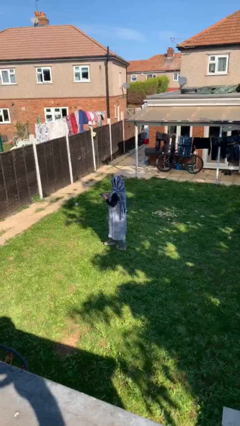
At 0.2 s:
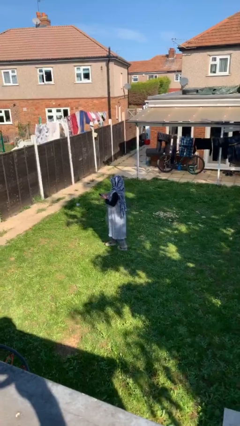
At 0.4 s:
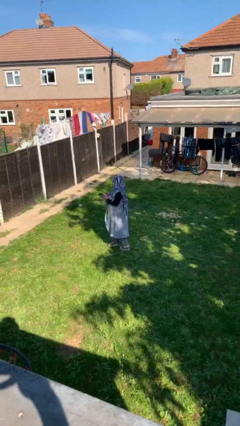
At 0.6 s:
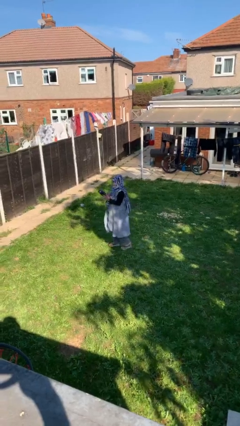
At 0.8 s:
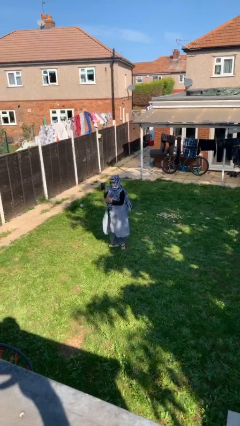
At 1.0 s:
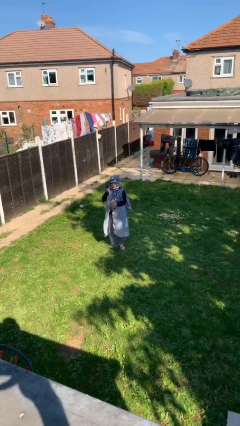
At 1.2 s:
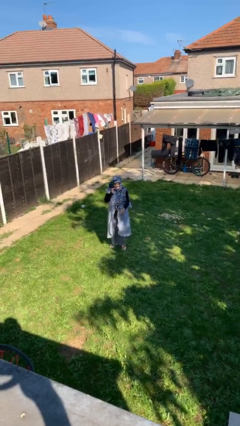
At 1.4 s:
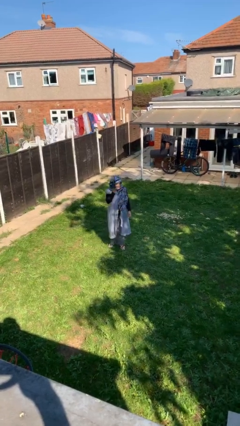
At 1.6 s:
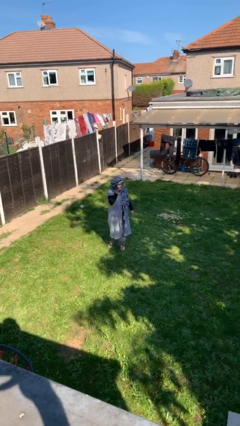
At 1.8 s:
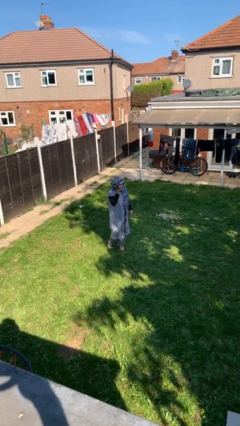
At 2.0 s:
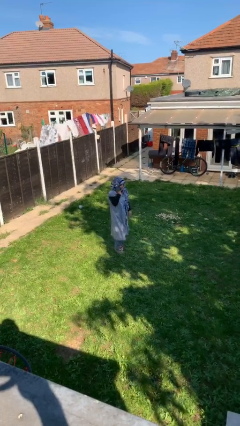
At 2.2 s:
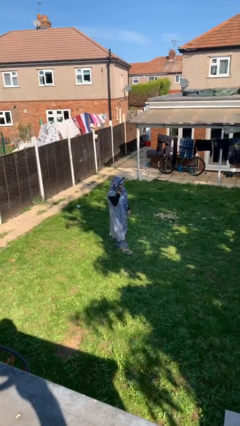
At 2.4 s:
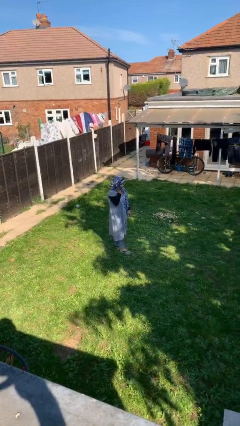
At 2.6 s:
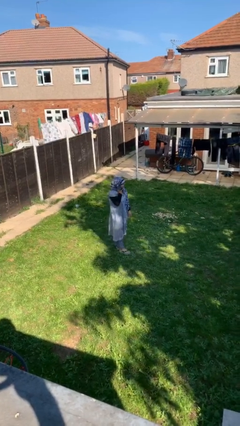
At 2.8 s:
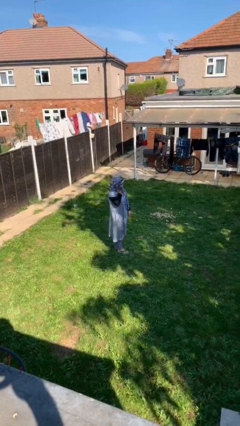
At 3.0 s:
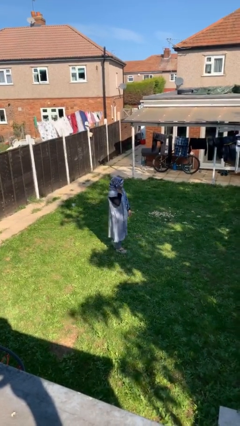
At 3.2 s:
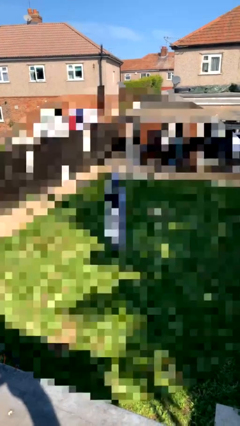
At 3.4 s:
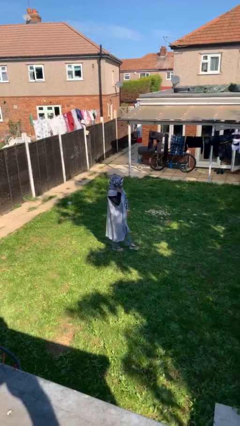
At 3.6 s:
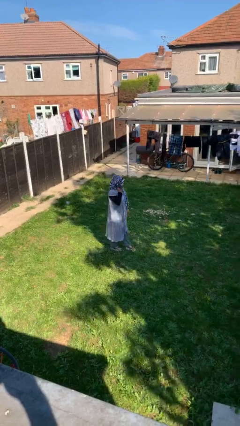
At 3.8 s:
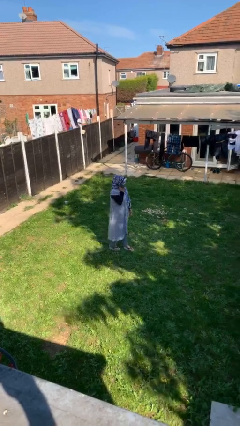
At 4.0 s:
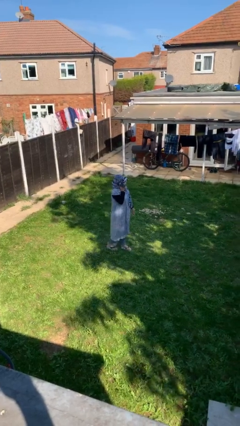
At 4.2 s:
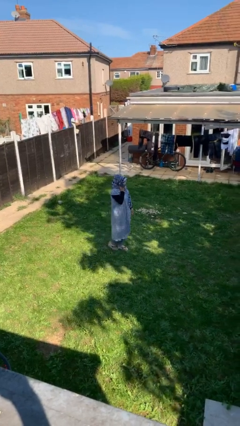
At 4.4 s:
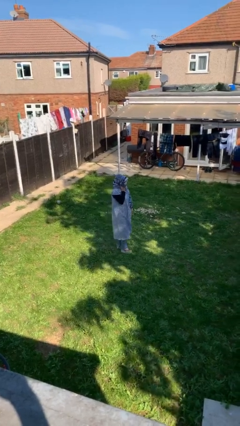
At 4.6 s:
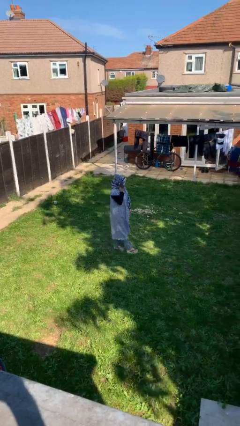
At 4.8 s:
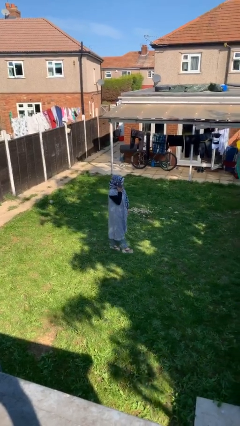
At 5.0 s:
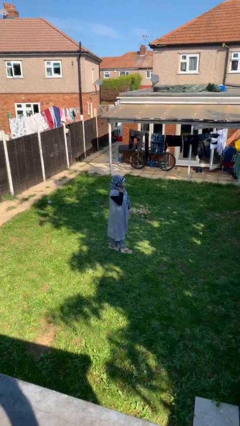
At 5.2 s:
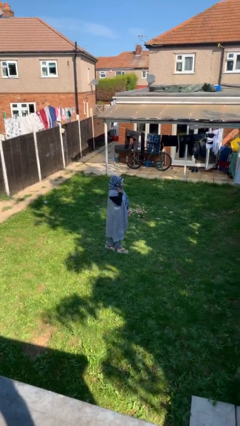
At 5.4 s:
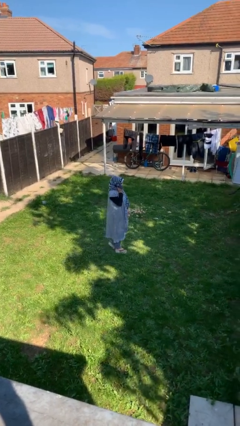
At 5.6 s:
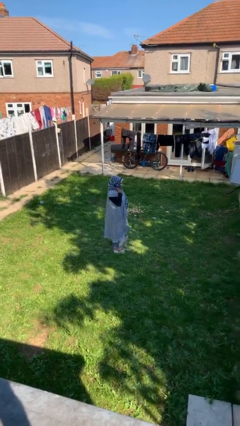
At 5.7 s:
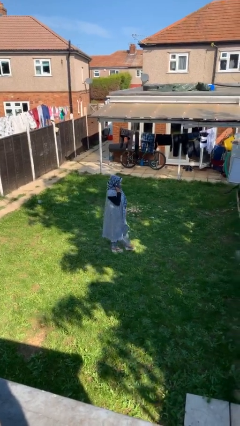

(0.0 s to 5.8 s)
person talks on phone

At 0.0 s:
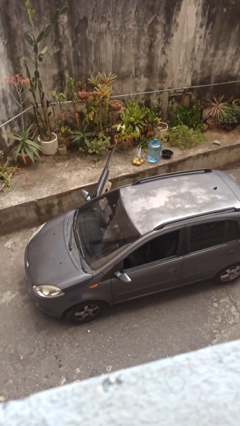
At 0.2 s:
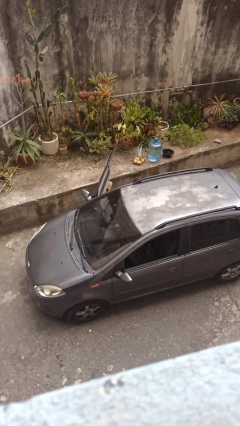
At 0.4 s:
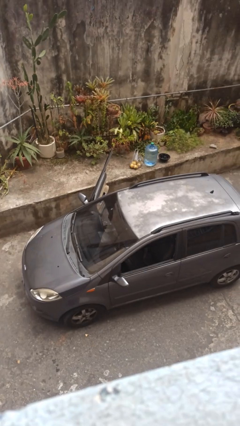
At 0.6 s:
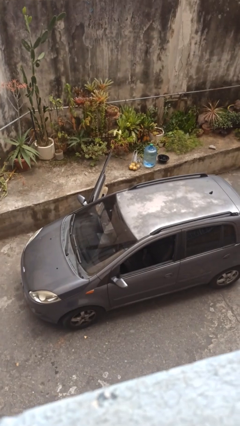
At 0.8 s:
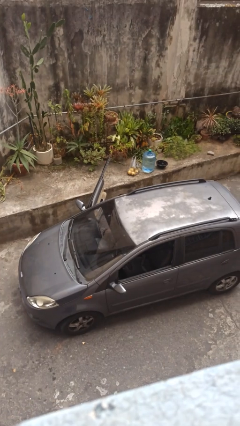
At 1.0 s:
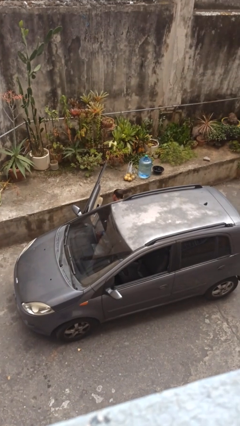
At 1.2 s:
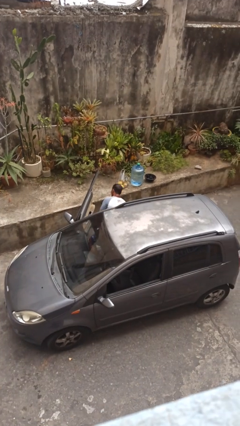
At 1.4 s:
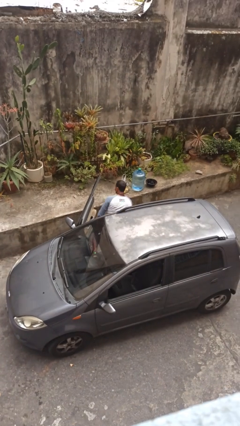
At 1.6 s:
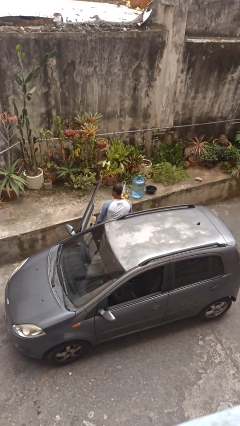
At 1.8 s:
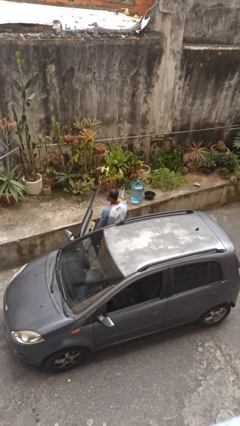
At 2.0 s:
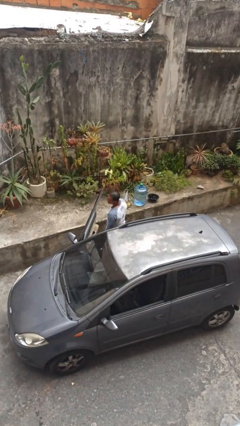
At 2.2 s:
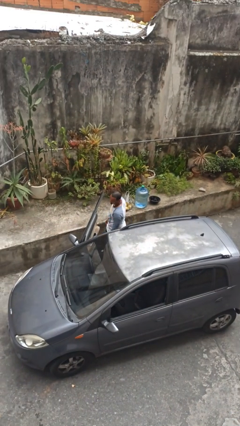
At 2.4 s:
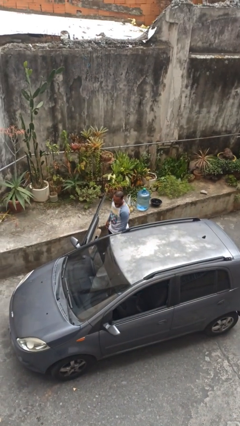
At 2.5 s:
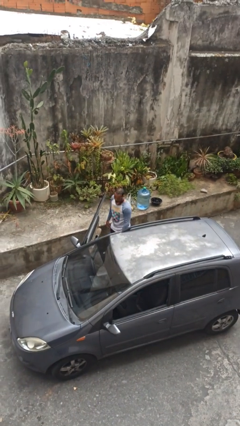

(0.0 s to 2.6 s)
person exits car

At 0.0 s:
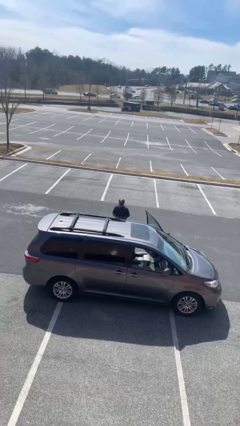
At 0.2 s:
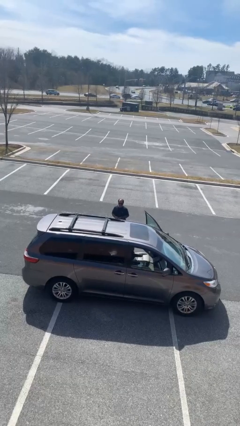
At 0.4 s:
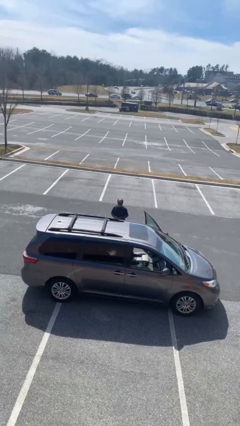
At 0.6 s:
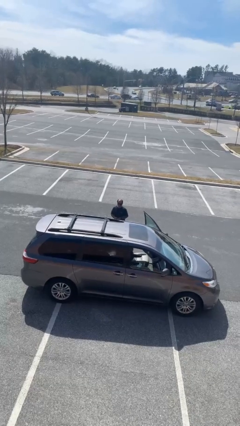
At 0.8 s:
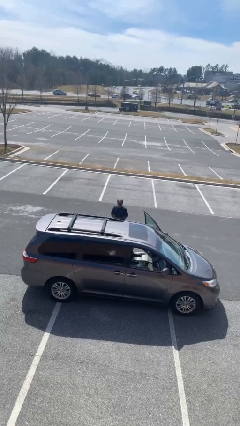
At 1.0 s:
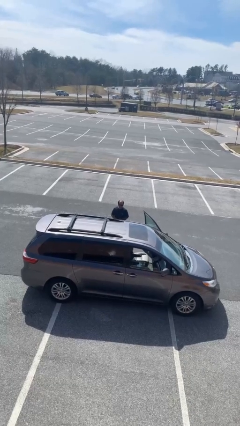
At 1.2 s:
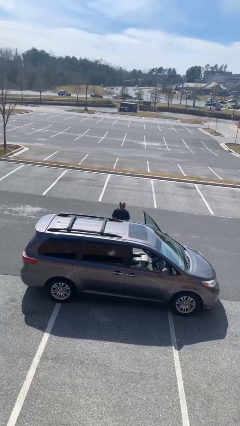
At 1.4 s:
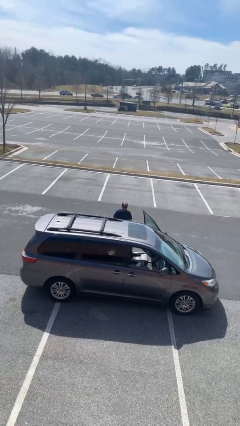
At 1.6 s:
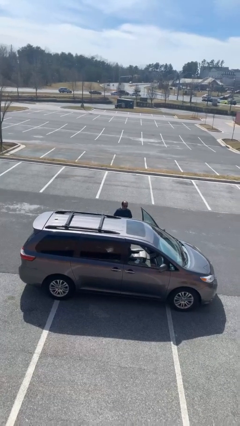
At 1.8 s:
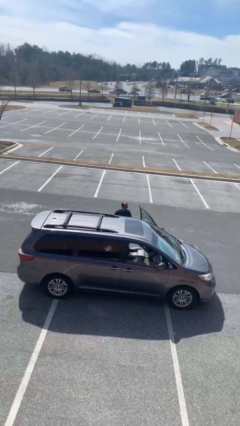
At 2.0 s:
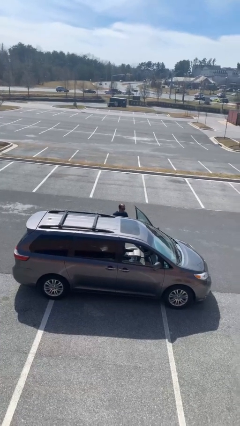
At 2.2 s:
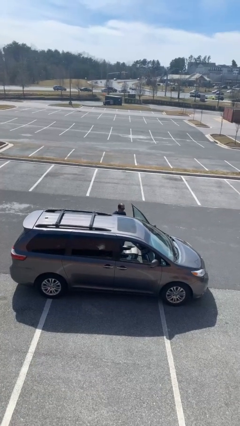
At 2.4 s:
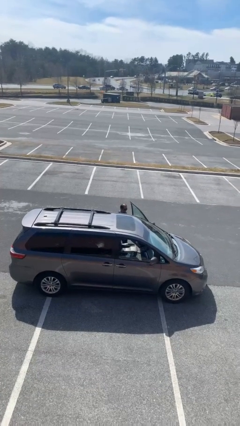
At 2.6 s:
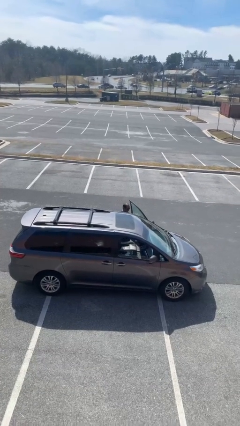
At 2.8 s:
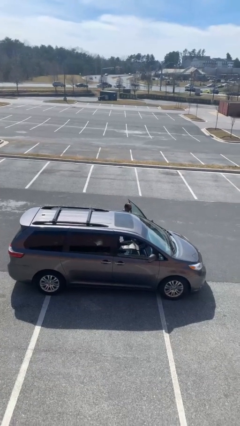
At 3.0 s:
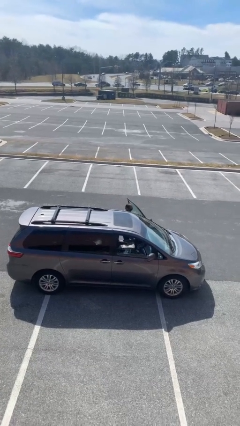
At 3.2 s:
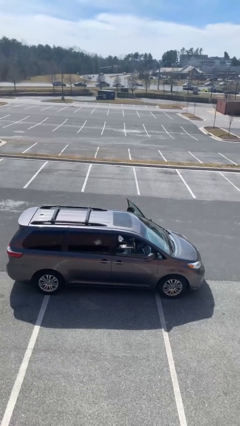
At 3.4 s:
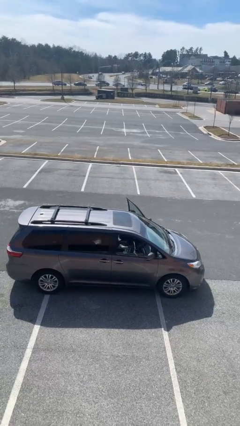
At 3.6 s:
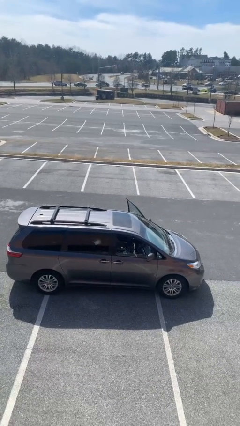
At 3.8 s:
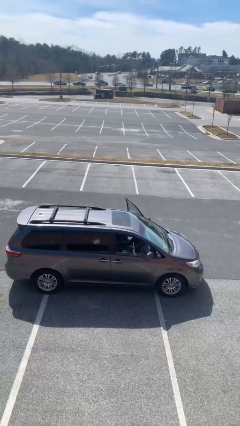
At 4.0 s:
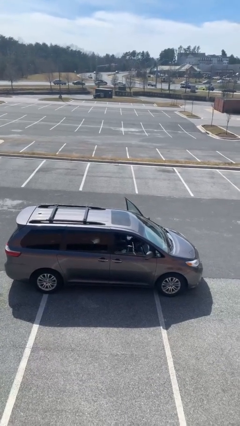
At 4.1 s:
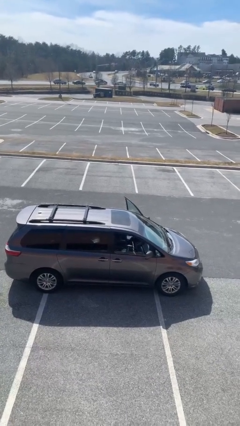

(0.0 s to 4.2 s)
person enters car

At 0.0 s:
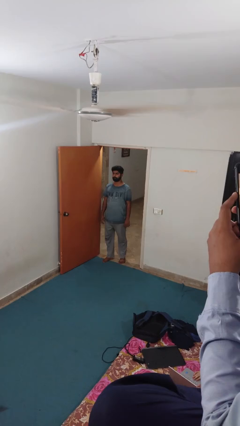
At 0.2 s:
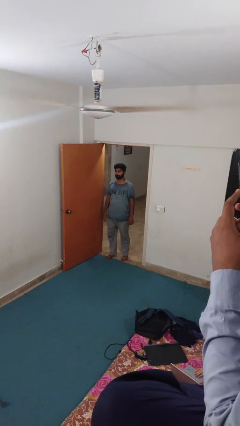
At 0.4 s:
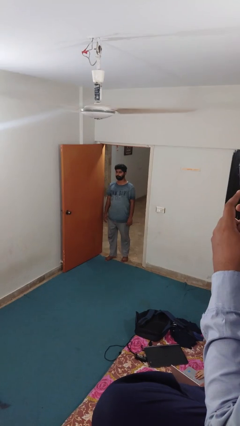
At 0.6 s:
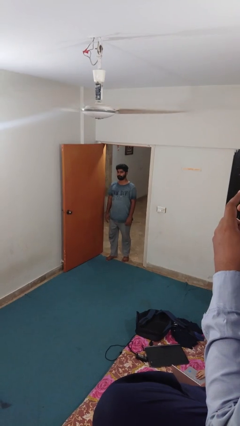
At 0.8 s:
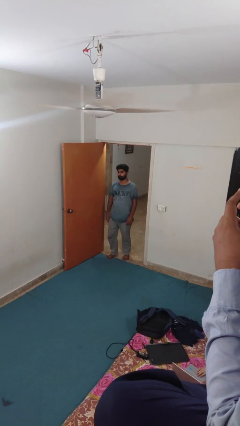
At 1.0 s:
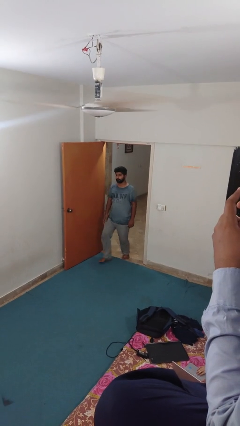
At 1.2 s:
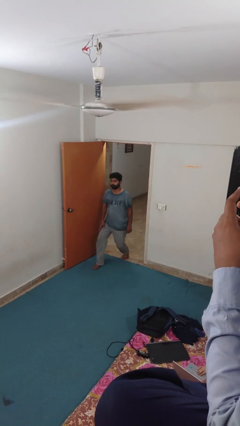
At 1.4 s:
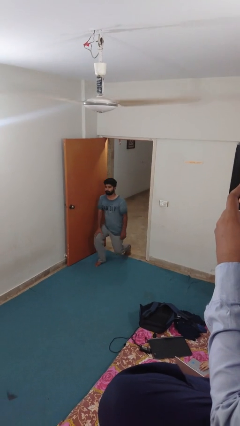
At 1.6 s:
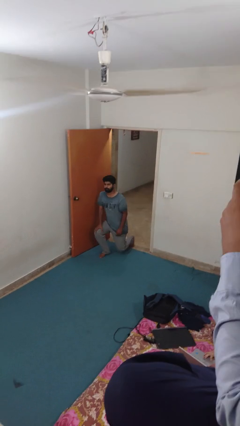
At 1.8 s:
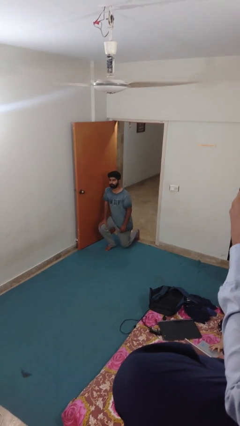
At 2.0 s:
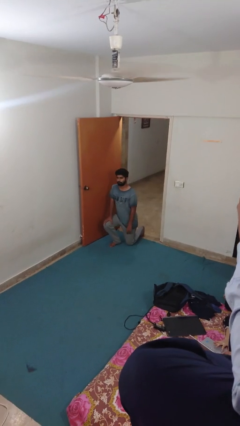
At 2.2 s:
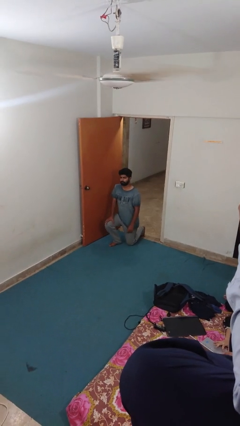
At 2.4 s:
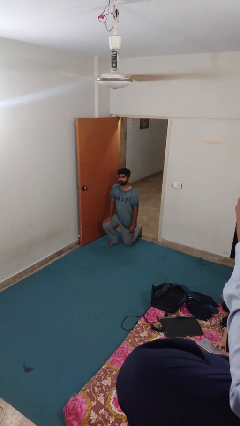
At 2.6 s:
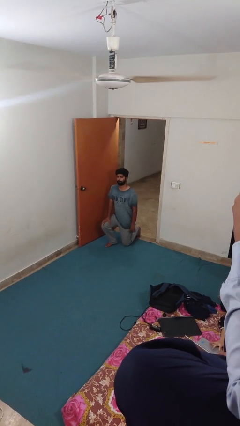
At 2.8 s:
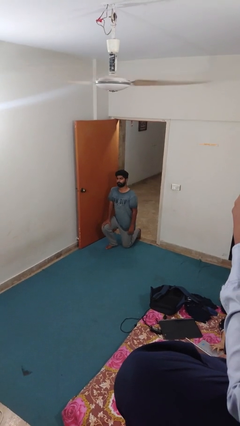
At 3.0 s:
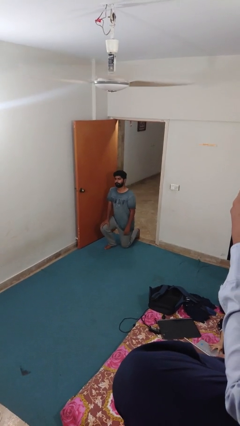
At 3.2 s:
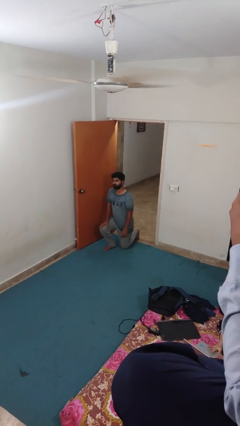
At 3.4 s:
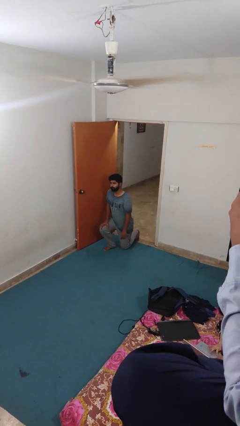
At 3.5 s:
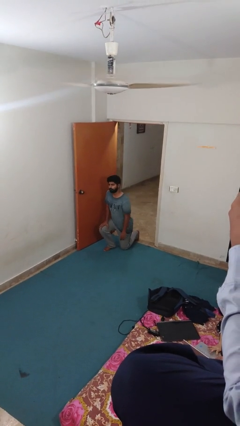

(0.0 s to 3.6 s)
person kneels

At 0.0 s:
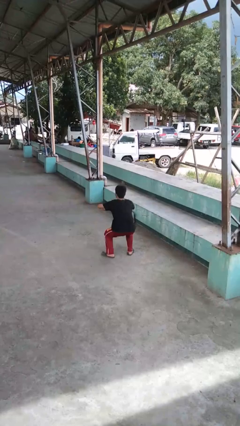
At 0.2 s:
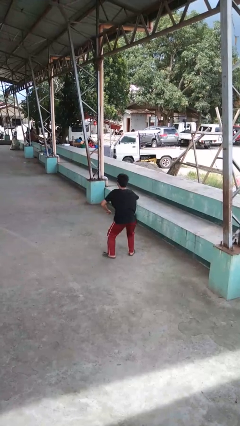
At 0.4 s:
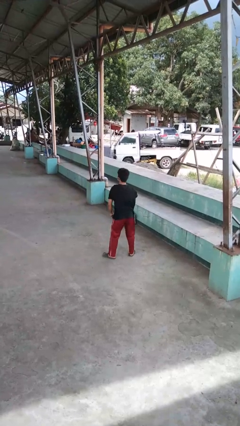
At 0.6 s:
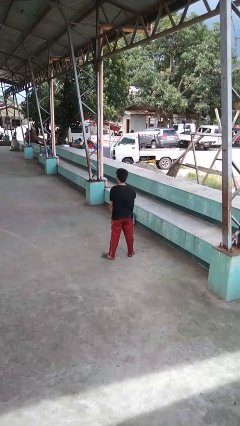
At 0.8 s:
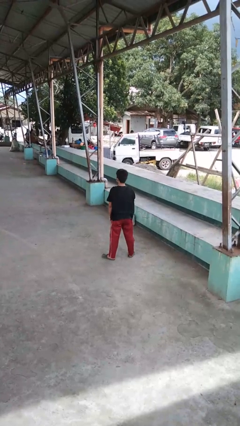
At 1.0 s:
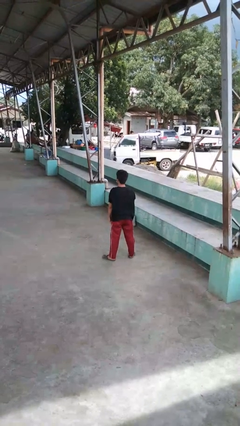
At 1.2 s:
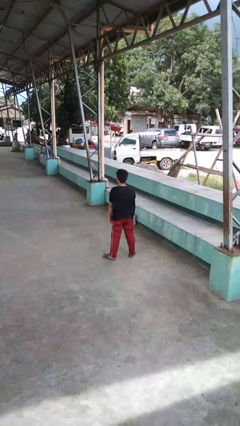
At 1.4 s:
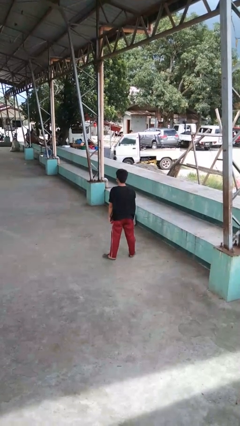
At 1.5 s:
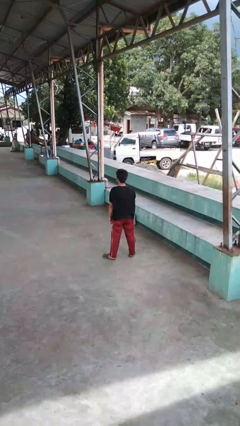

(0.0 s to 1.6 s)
person stands up
